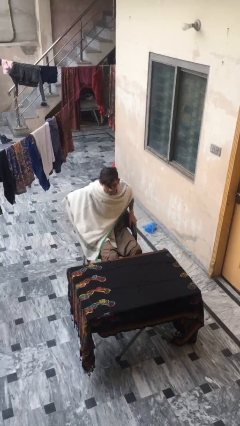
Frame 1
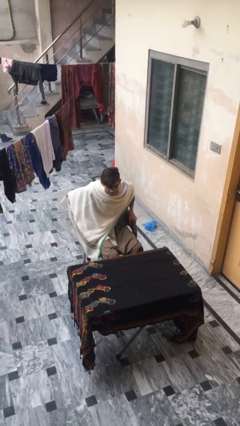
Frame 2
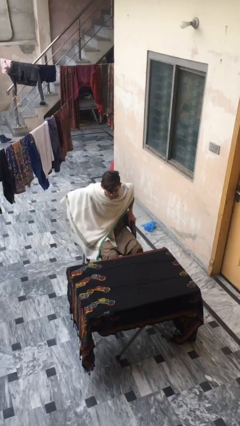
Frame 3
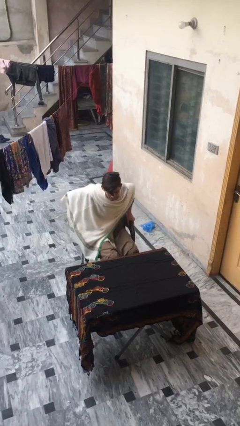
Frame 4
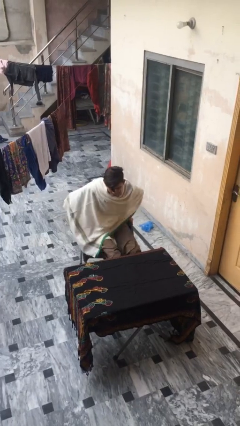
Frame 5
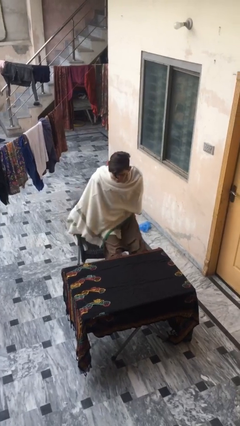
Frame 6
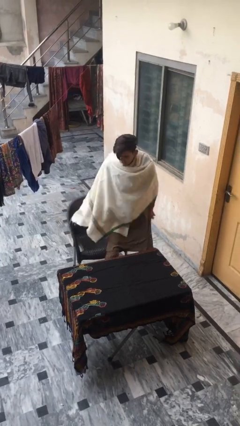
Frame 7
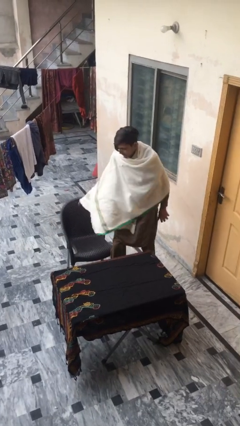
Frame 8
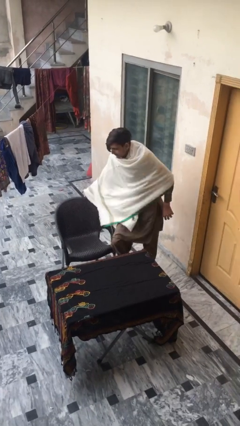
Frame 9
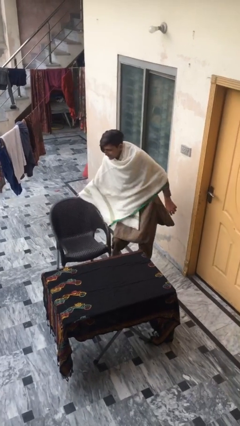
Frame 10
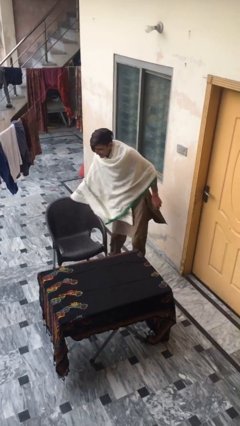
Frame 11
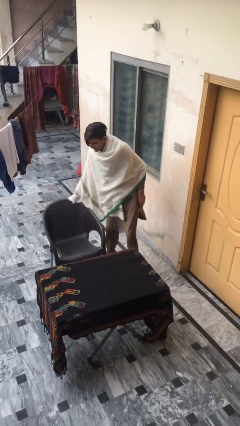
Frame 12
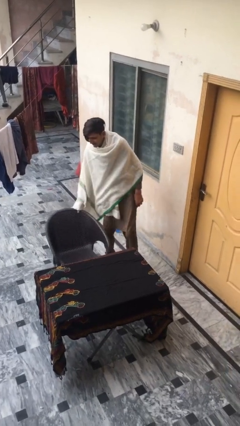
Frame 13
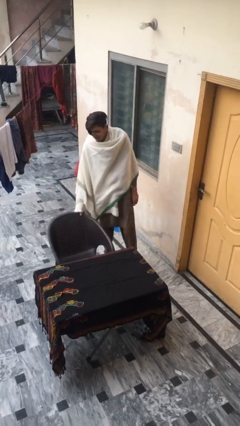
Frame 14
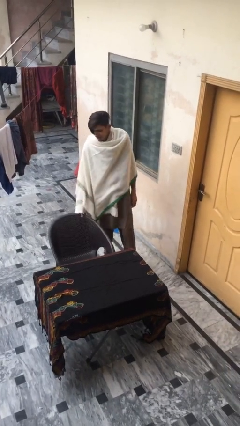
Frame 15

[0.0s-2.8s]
person stands up

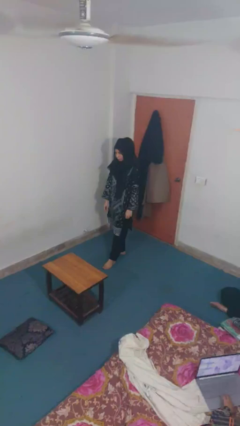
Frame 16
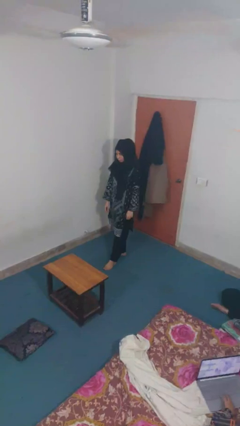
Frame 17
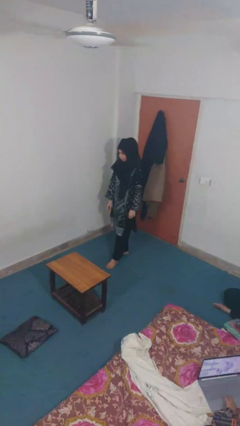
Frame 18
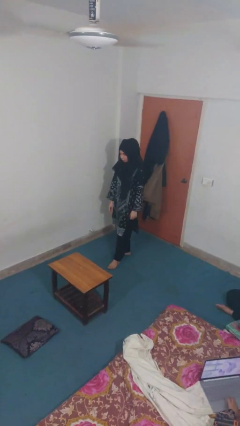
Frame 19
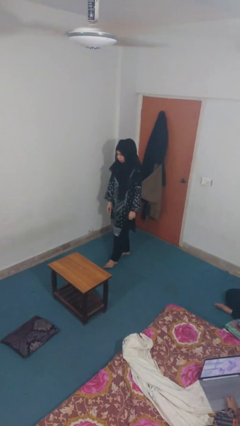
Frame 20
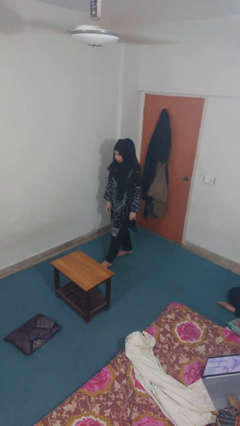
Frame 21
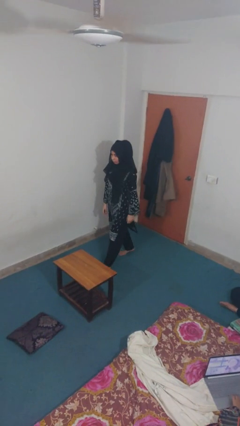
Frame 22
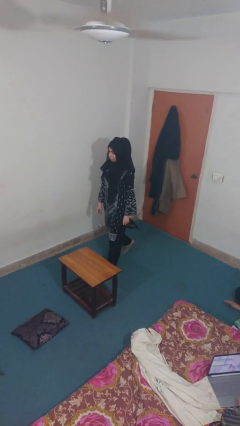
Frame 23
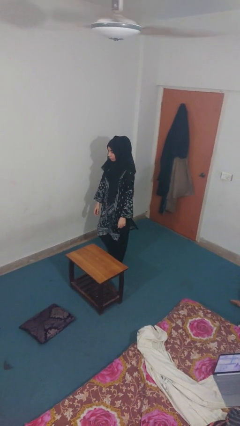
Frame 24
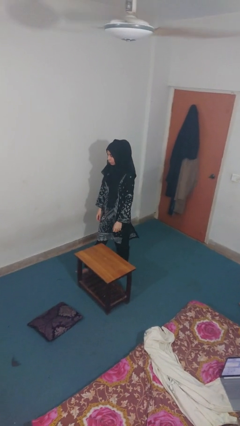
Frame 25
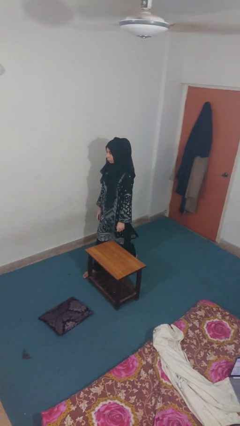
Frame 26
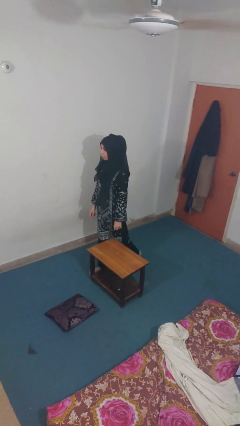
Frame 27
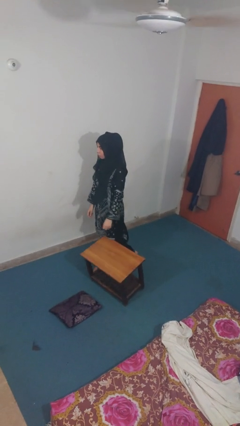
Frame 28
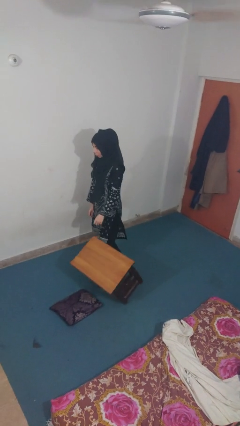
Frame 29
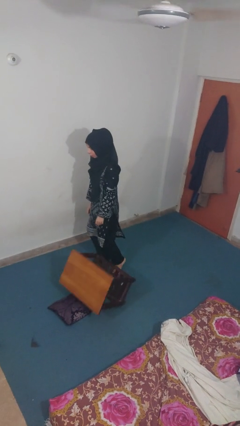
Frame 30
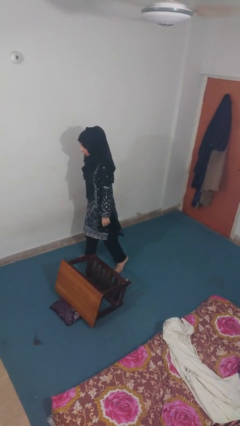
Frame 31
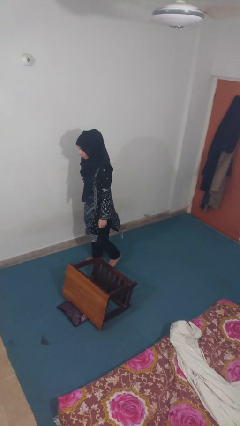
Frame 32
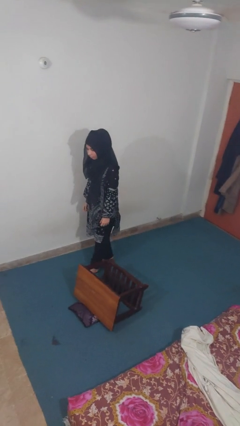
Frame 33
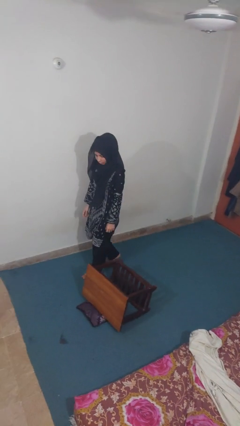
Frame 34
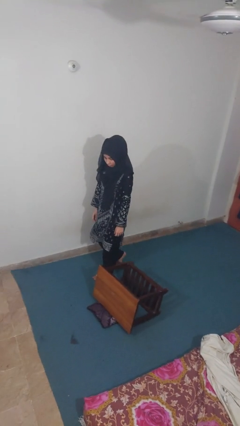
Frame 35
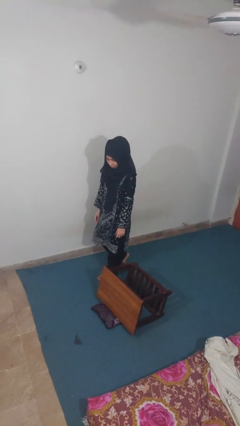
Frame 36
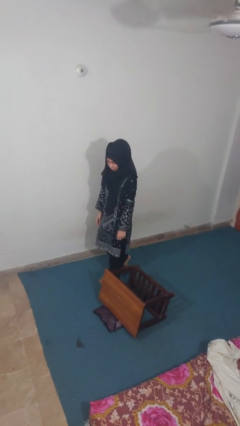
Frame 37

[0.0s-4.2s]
person knocks over furniture

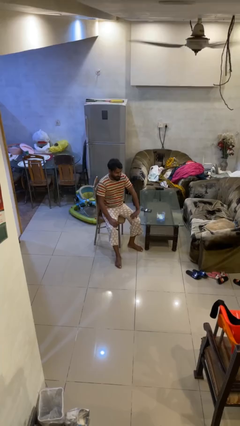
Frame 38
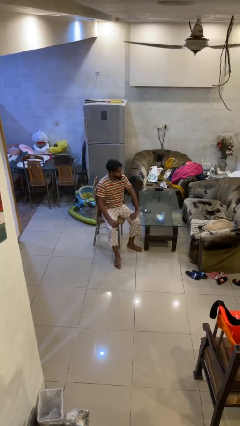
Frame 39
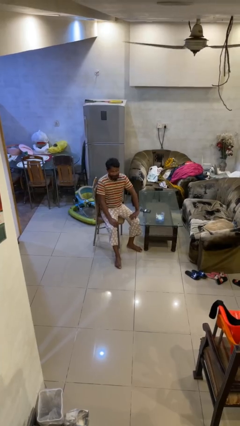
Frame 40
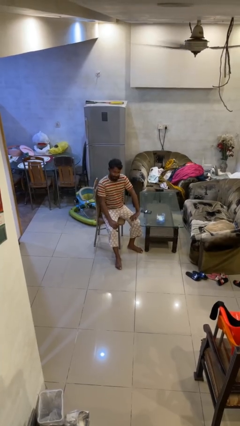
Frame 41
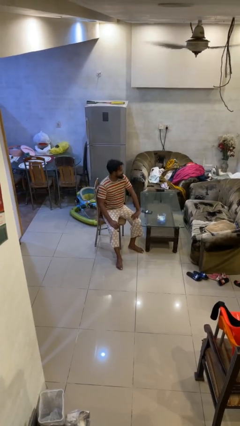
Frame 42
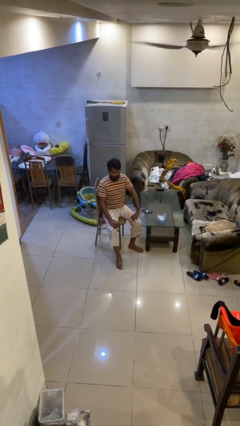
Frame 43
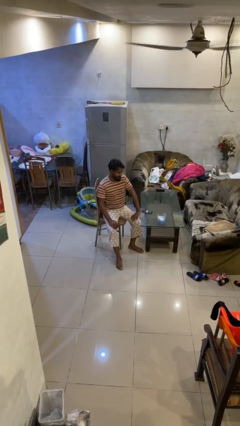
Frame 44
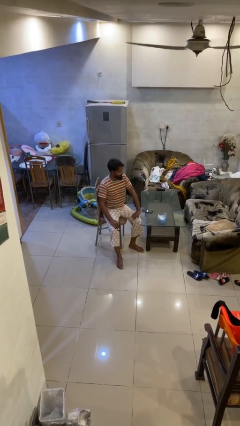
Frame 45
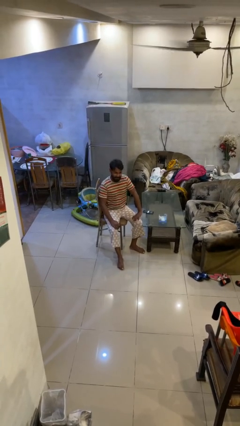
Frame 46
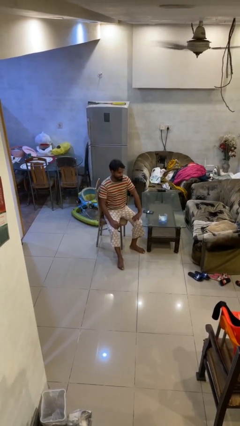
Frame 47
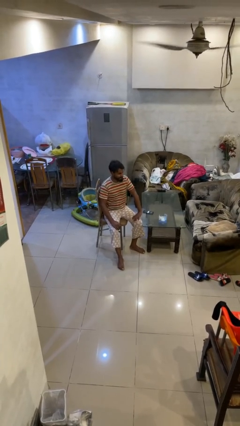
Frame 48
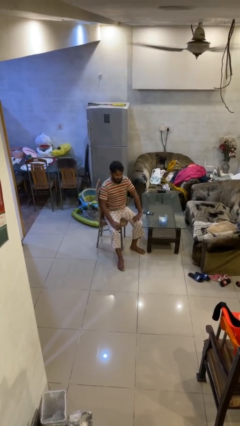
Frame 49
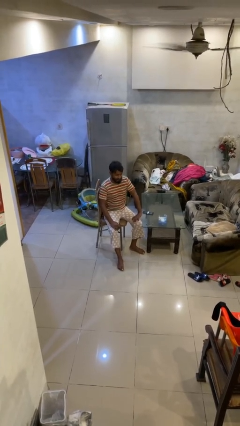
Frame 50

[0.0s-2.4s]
person shakes head

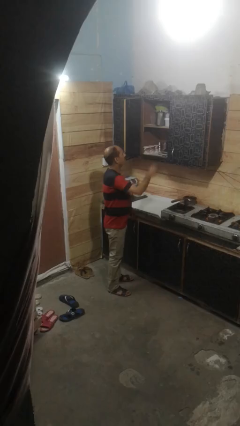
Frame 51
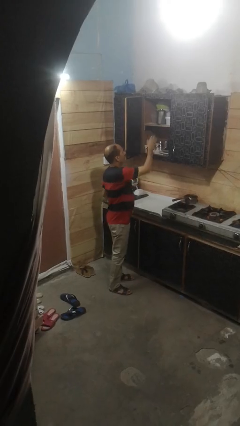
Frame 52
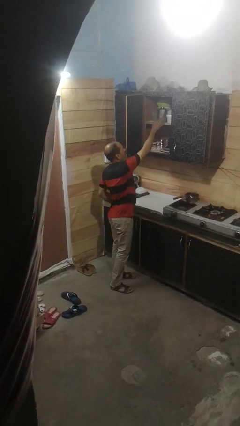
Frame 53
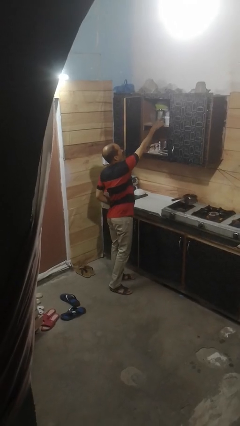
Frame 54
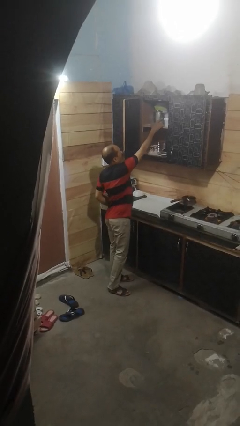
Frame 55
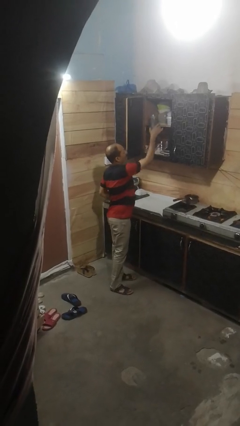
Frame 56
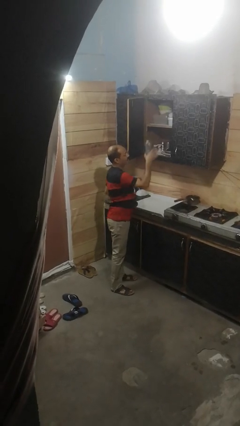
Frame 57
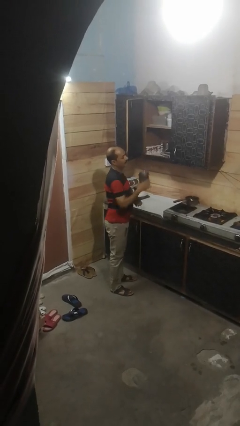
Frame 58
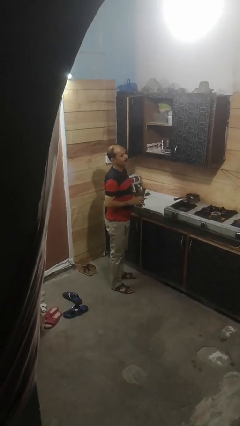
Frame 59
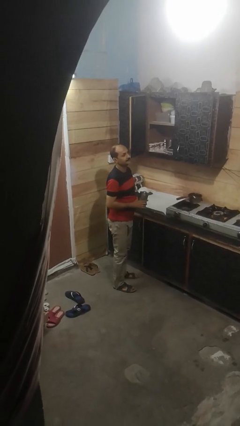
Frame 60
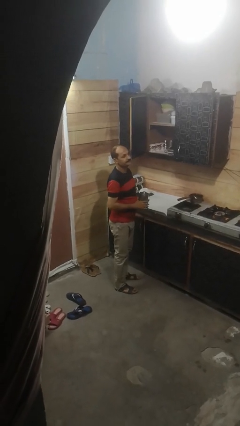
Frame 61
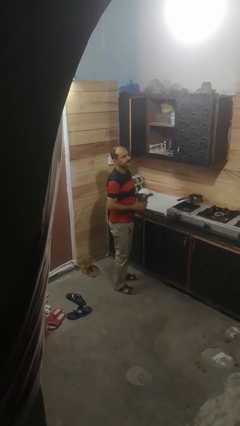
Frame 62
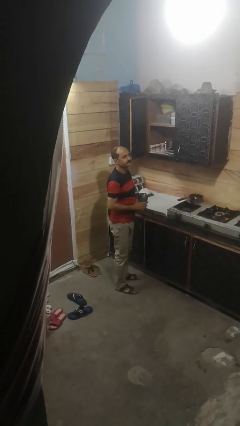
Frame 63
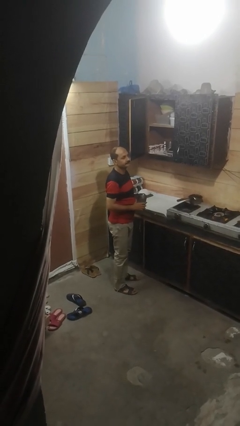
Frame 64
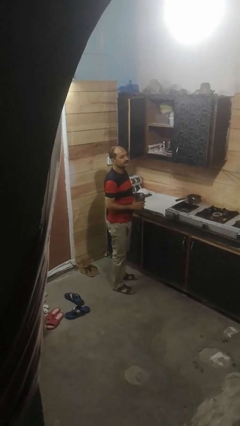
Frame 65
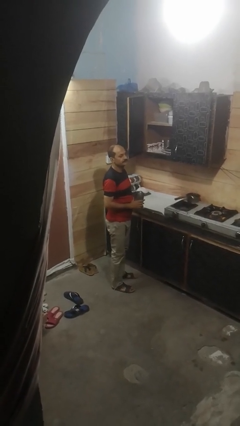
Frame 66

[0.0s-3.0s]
person picks up object from cabinet

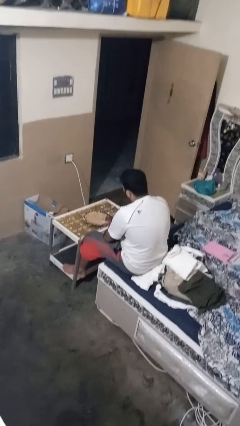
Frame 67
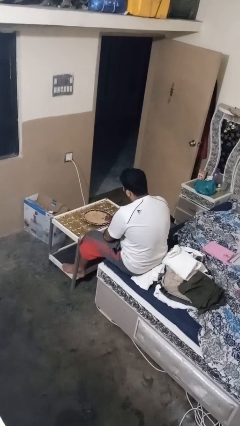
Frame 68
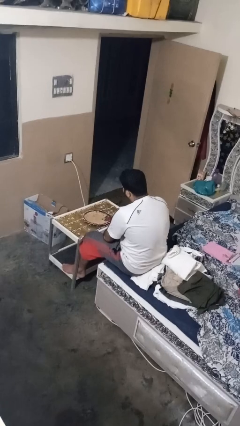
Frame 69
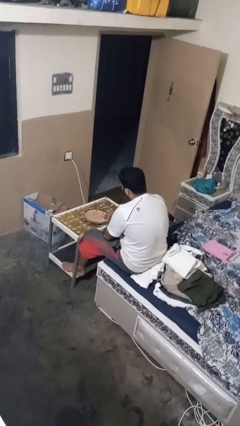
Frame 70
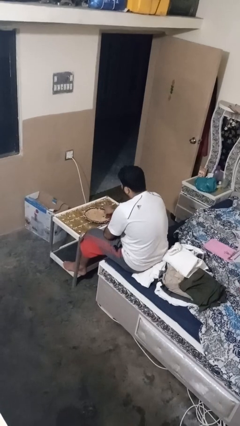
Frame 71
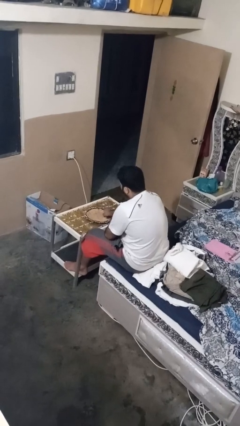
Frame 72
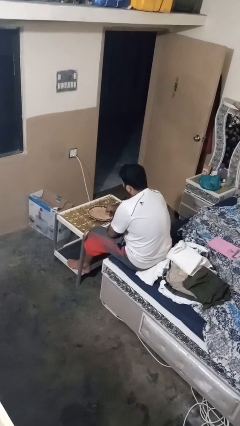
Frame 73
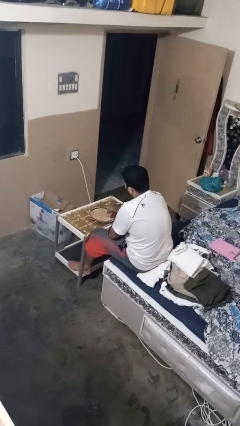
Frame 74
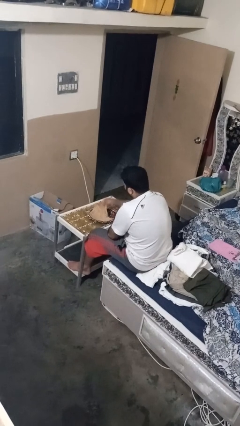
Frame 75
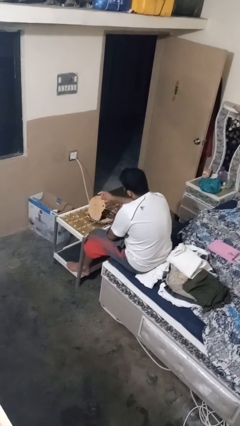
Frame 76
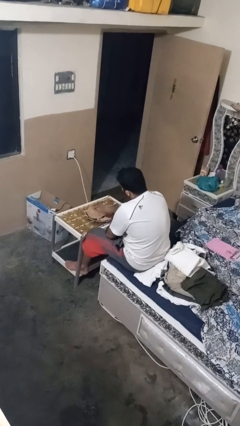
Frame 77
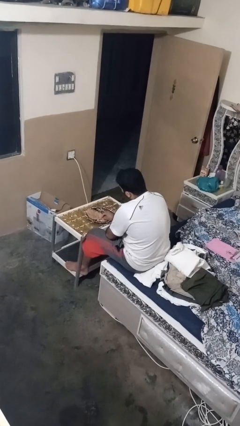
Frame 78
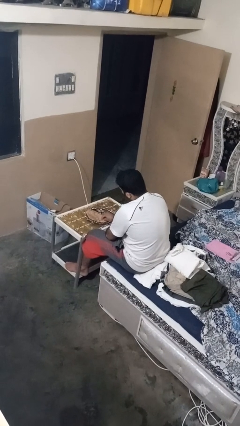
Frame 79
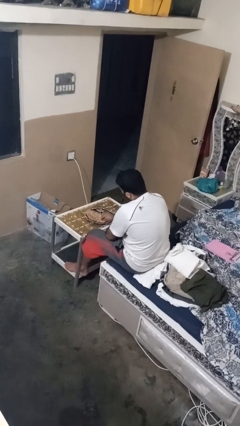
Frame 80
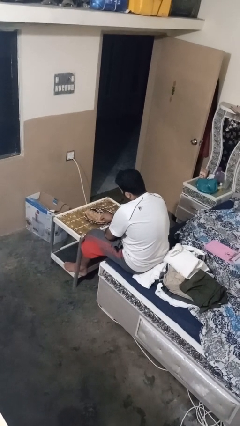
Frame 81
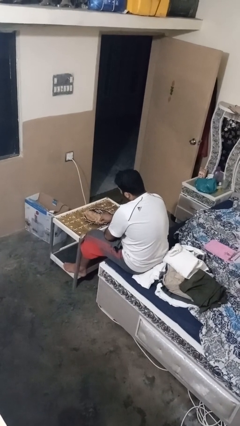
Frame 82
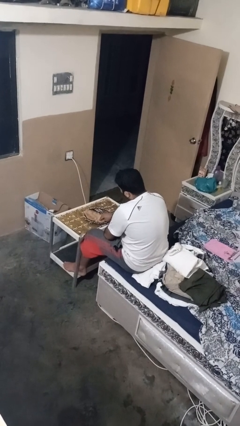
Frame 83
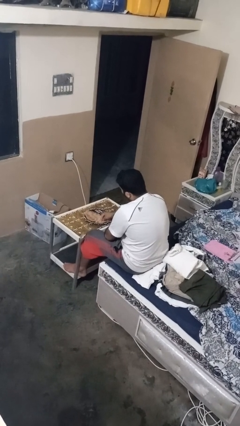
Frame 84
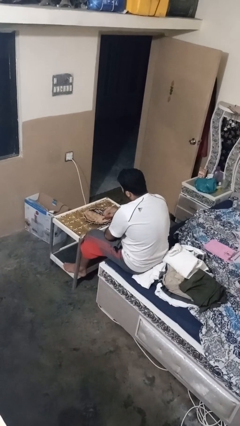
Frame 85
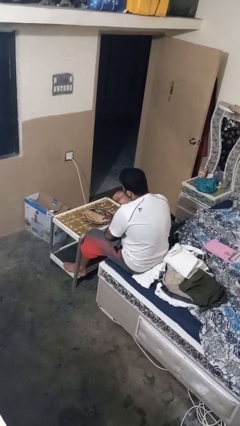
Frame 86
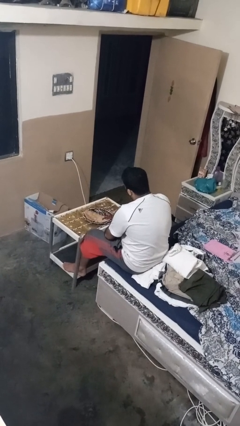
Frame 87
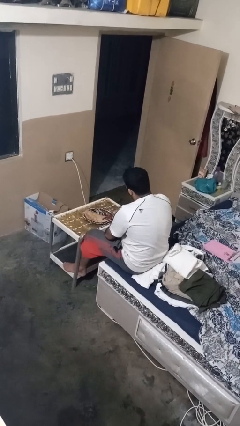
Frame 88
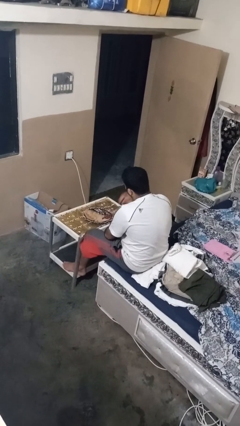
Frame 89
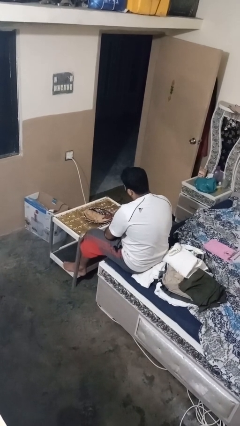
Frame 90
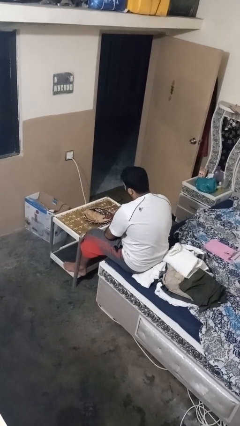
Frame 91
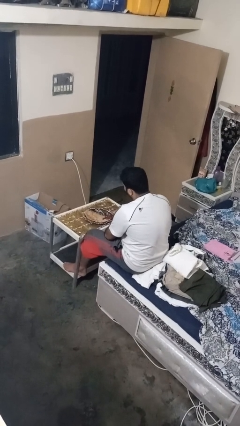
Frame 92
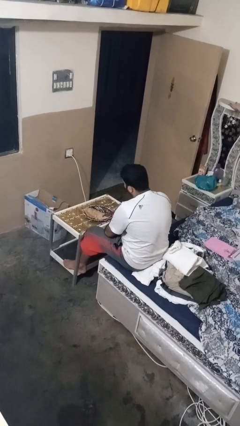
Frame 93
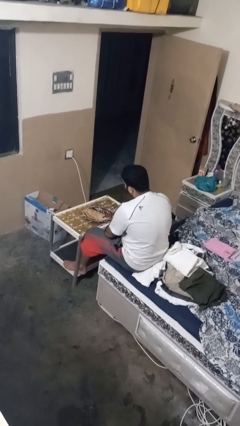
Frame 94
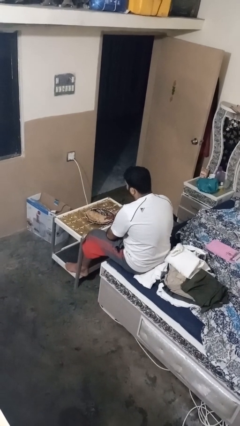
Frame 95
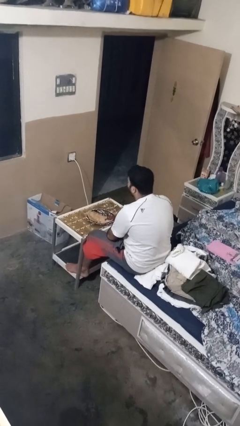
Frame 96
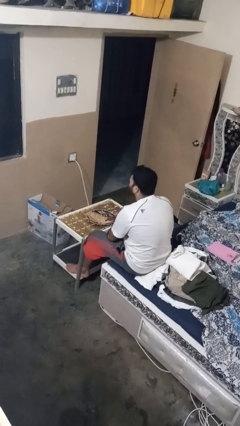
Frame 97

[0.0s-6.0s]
person eats with hands
